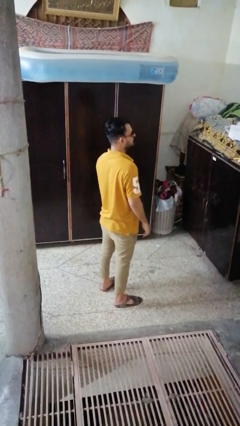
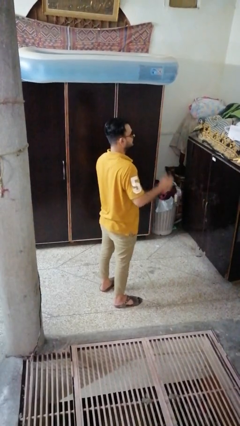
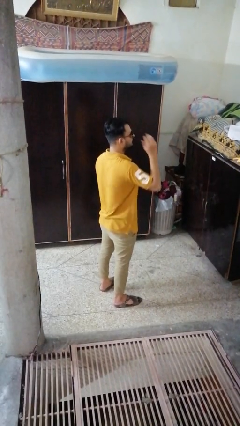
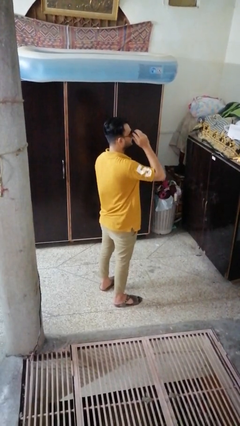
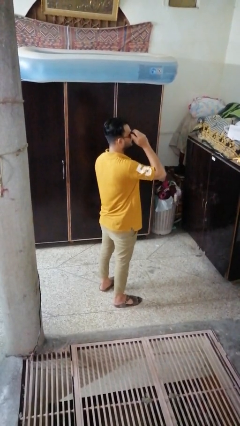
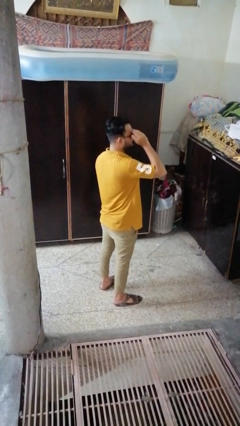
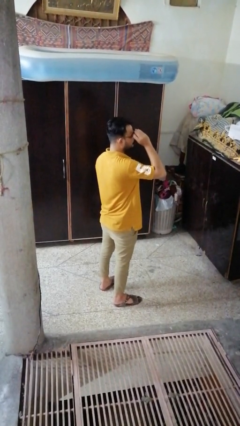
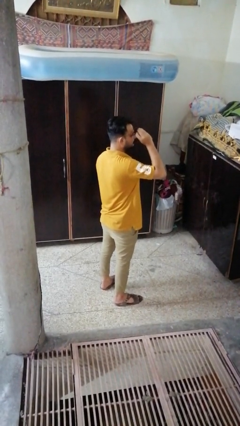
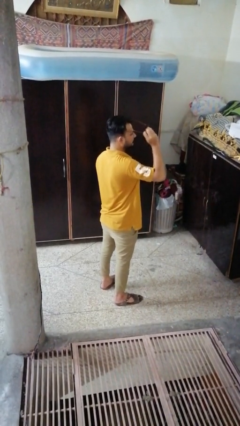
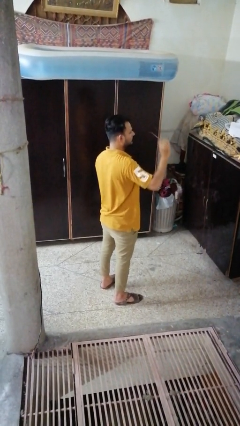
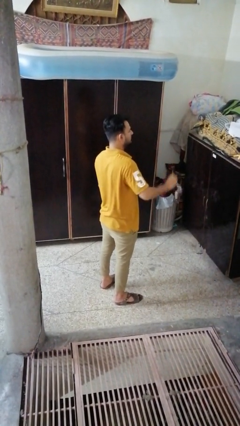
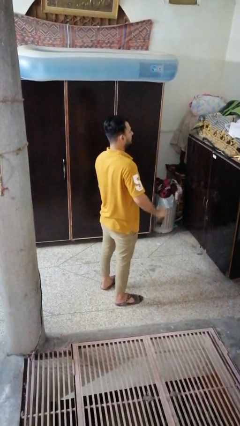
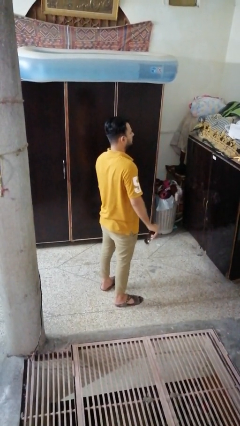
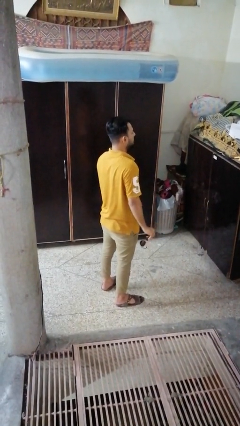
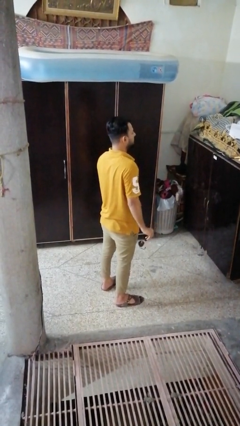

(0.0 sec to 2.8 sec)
person takes off sunglasses

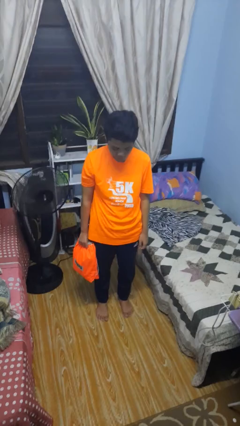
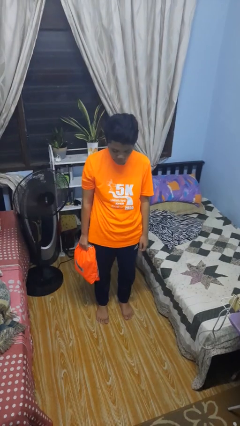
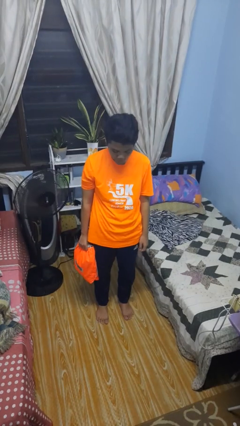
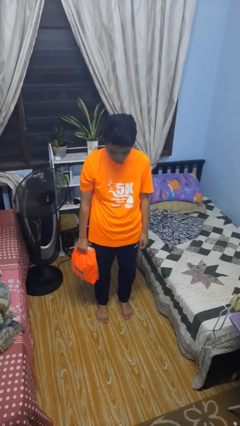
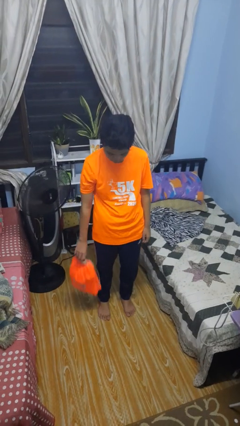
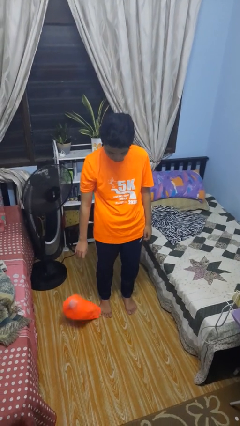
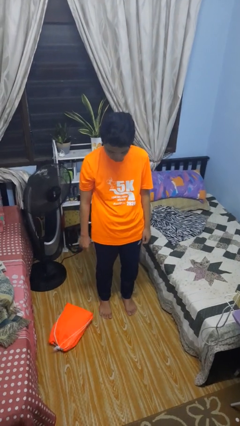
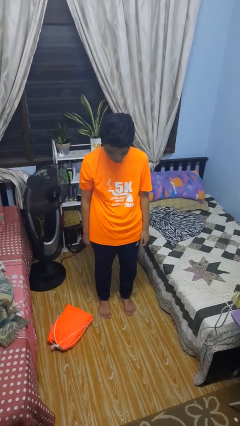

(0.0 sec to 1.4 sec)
person drops object

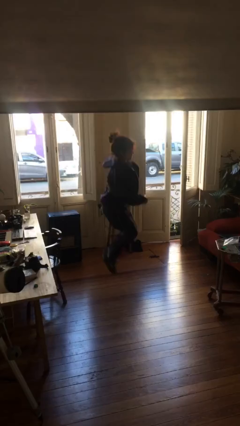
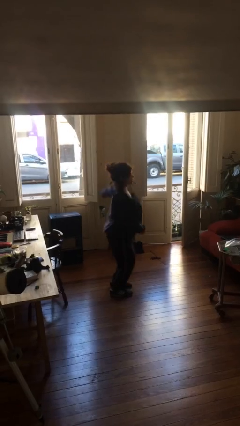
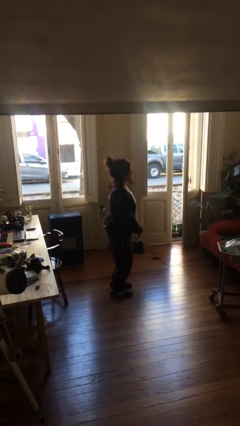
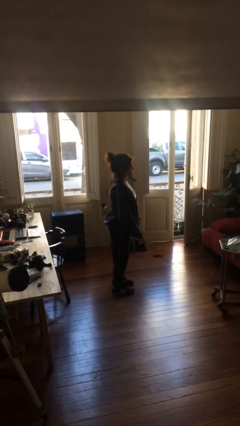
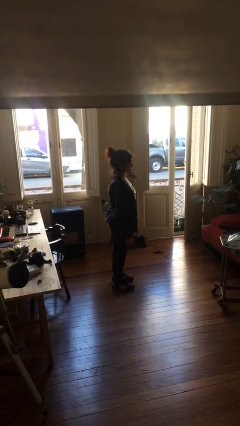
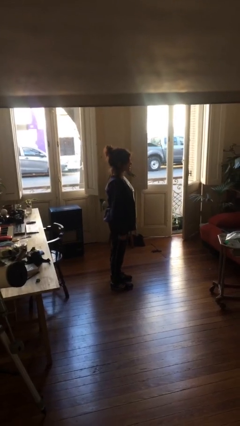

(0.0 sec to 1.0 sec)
person jumps

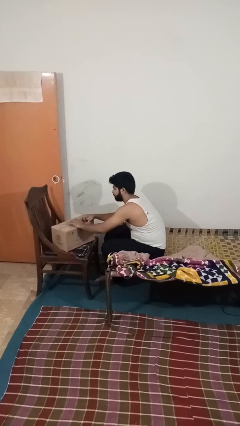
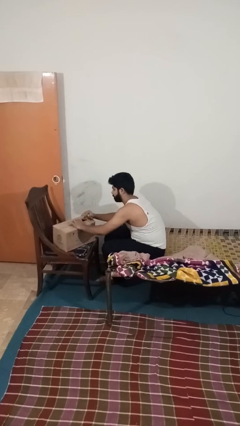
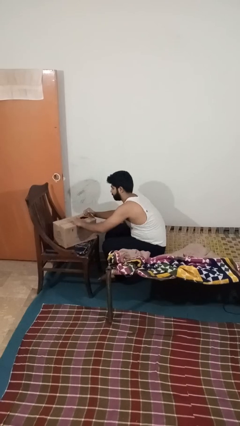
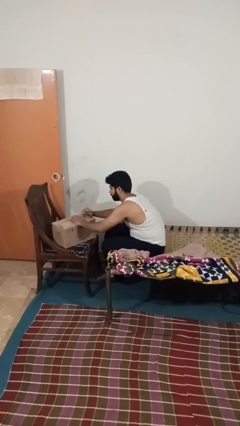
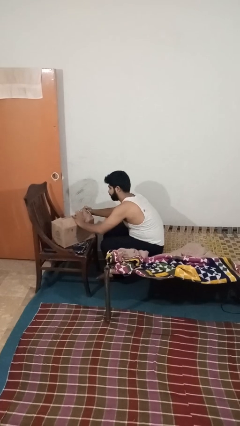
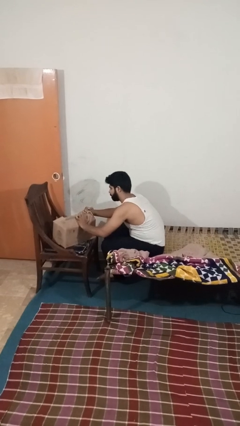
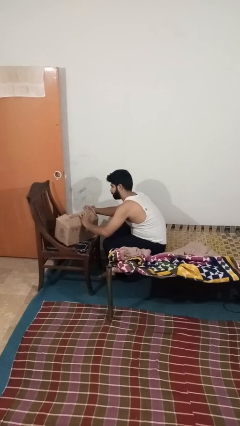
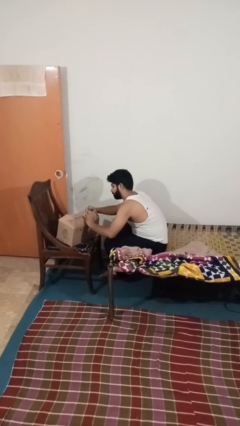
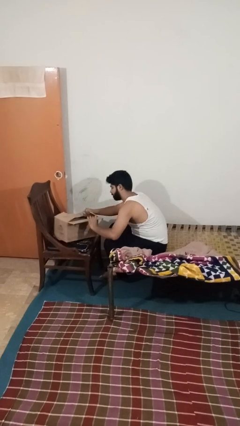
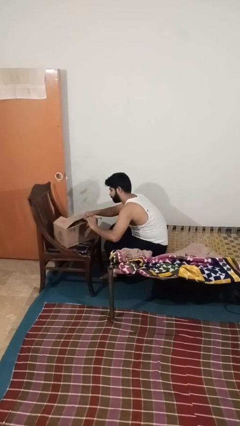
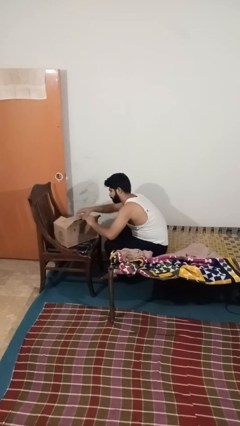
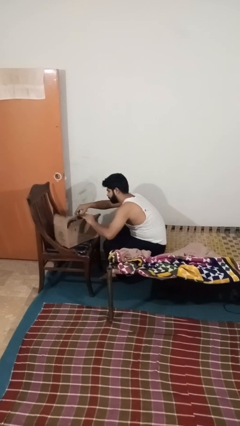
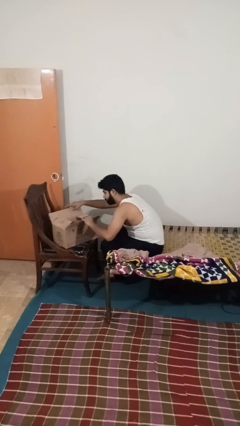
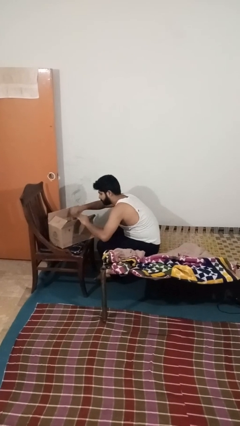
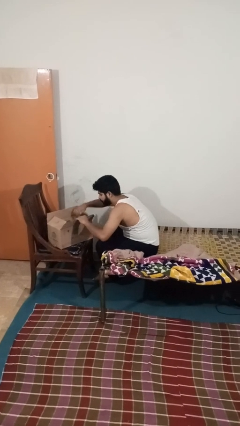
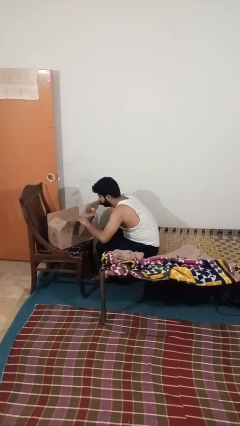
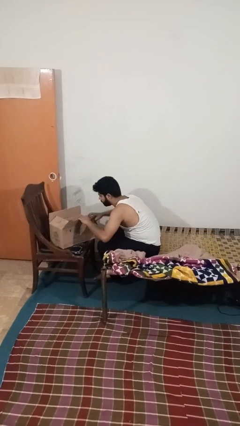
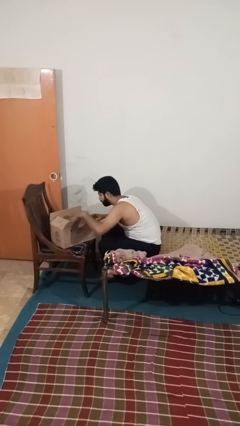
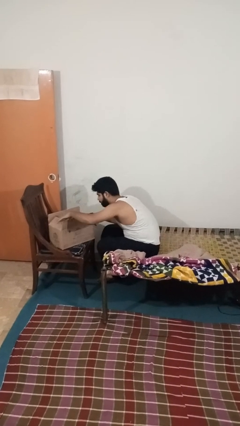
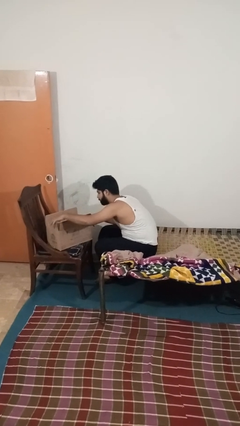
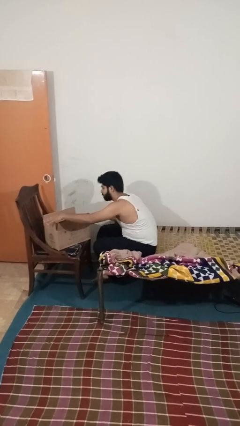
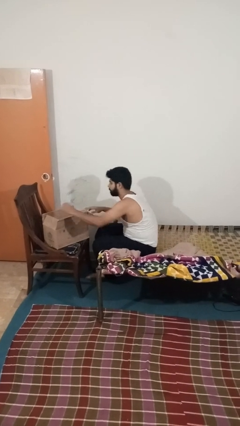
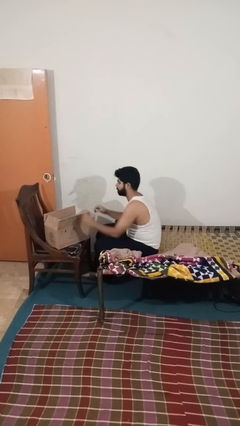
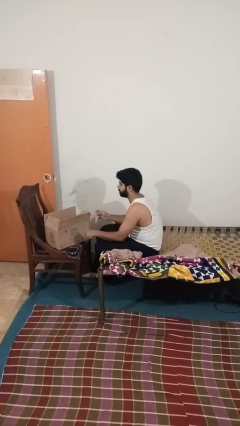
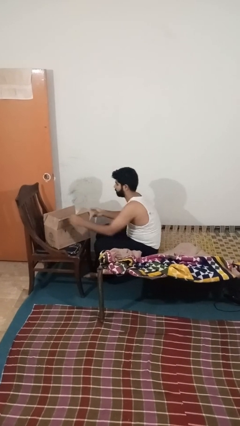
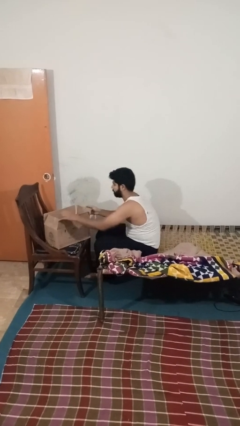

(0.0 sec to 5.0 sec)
person opens box

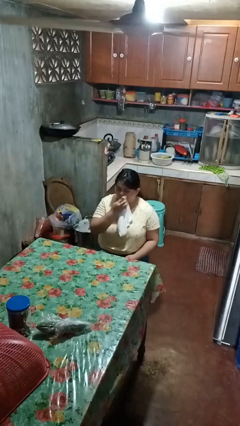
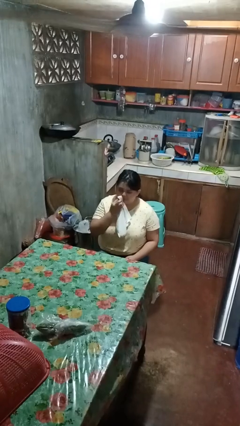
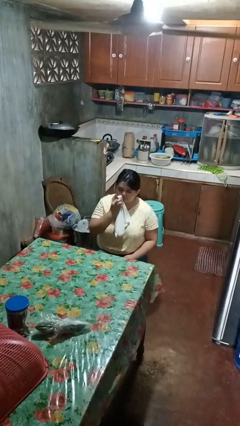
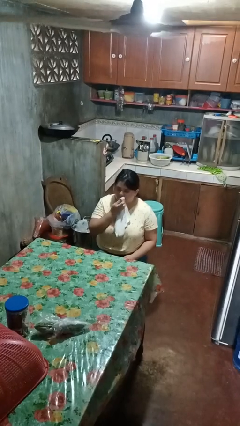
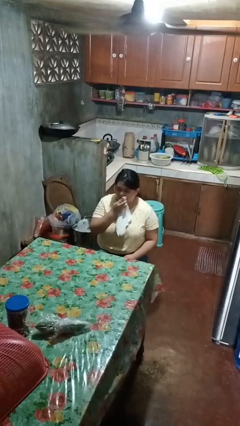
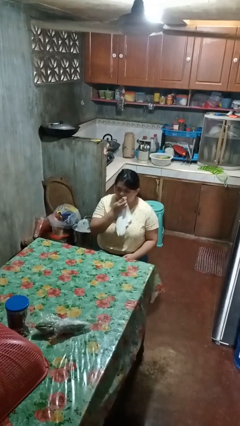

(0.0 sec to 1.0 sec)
person wipes mouth with napkin

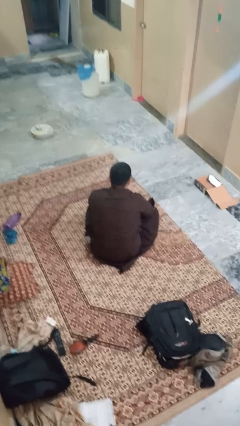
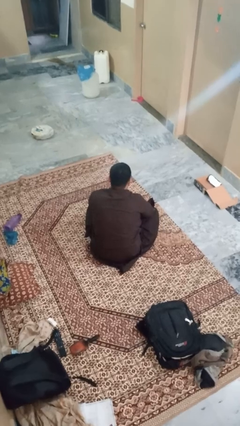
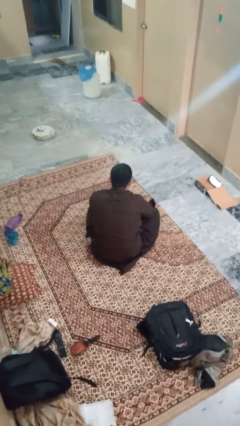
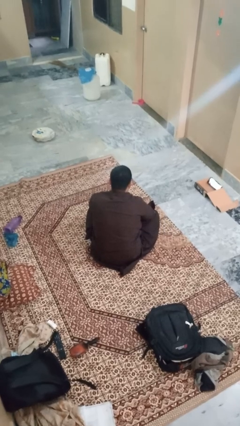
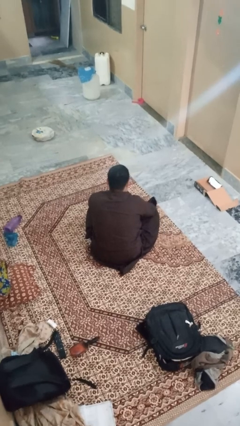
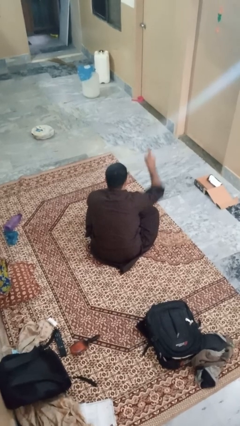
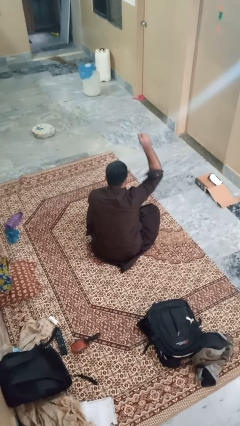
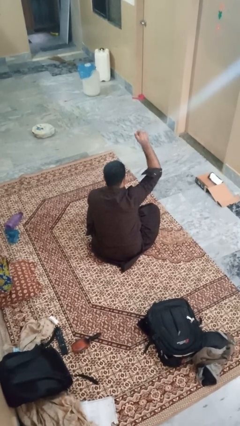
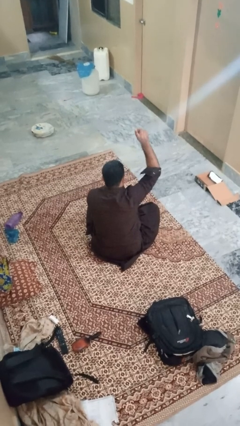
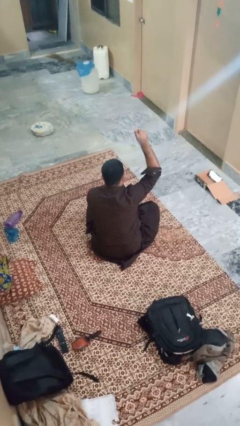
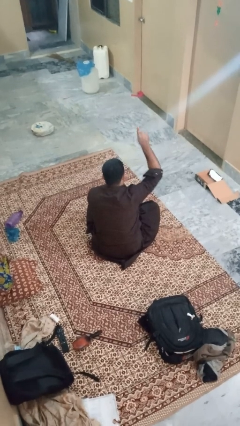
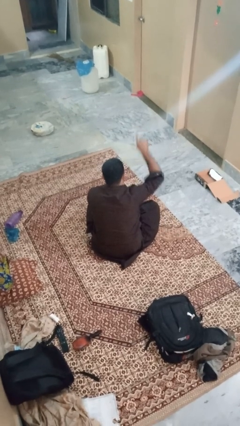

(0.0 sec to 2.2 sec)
person gestures number one

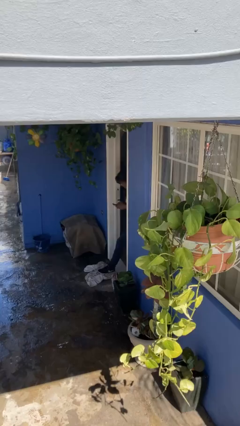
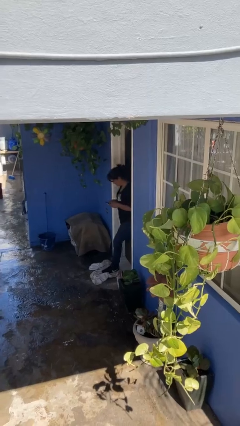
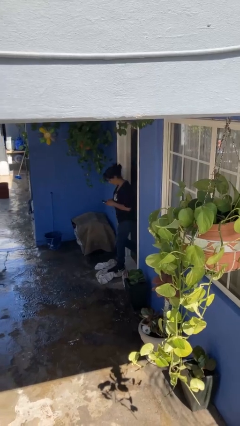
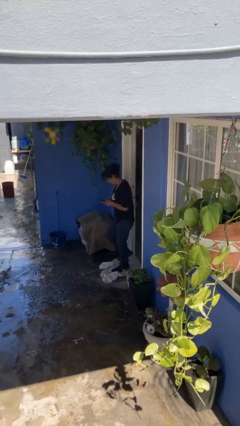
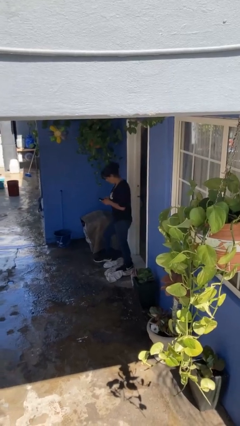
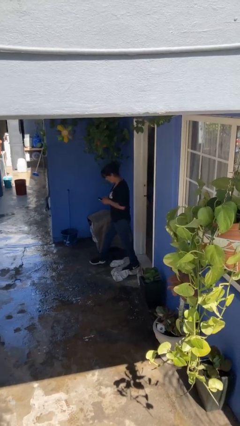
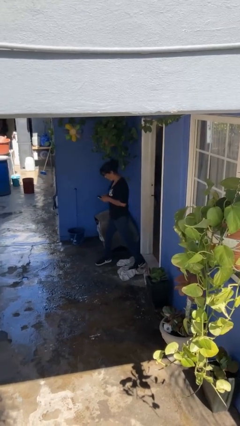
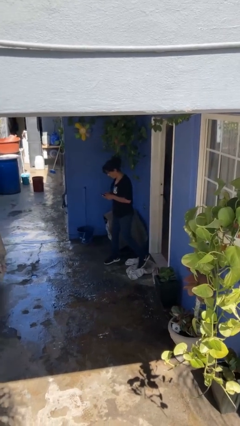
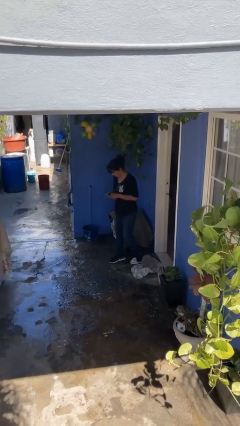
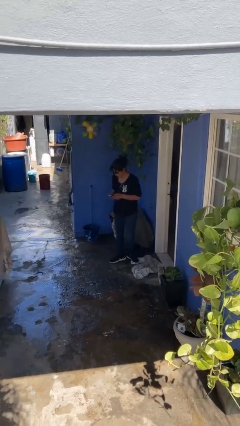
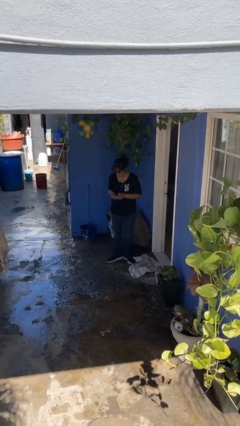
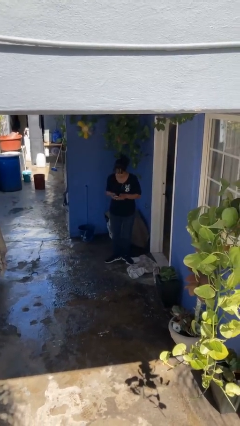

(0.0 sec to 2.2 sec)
person enters scene through structure

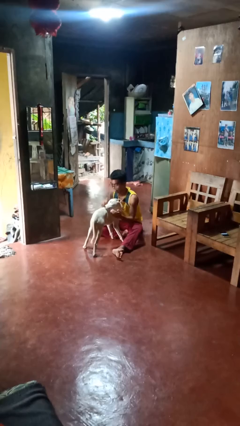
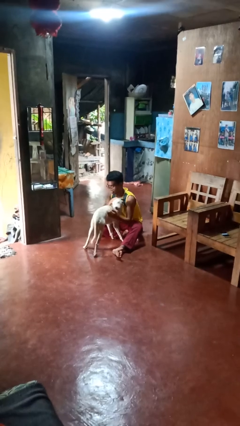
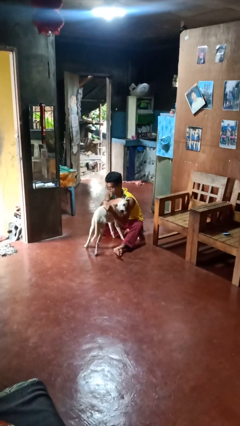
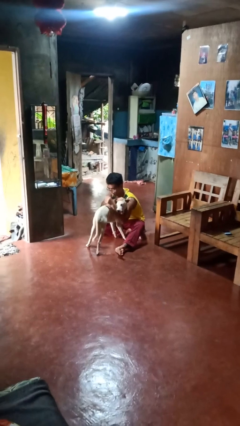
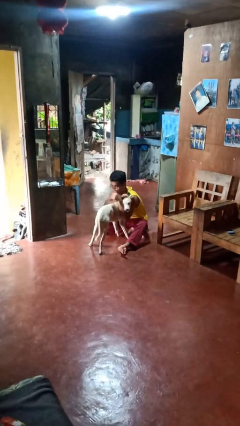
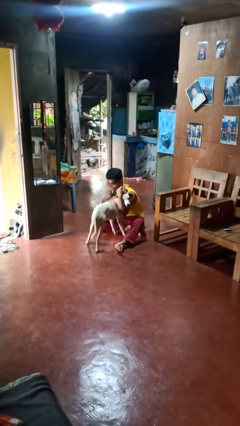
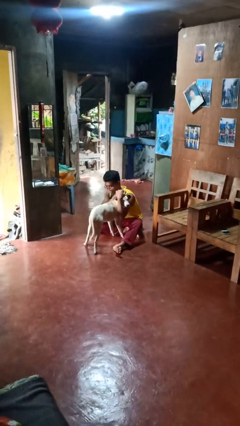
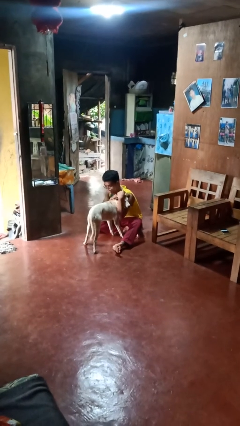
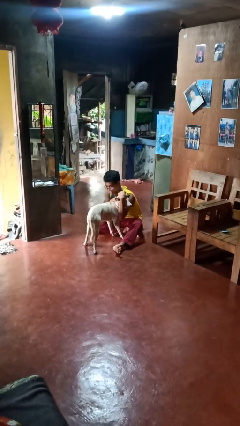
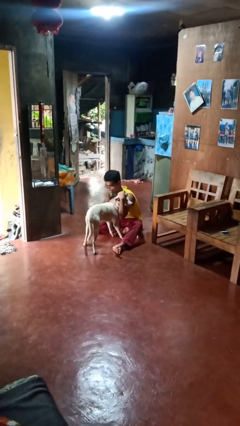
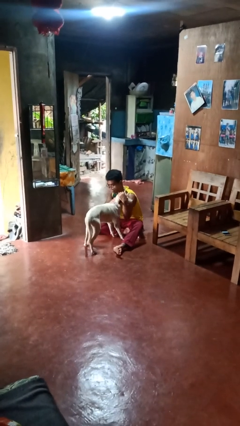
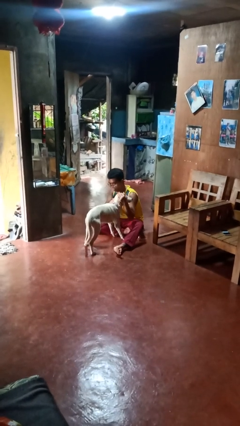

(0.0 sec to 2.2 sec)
person hugs dog
